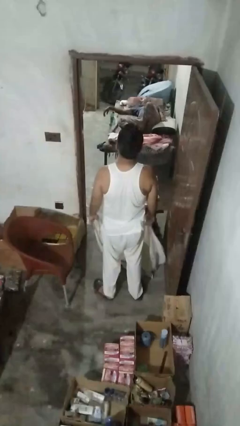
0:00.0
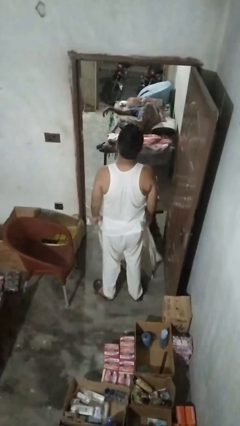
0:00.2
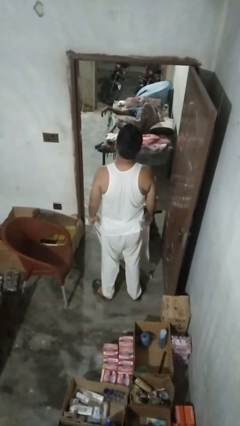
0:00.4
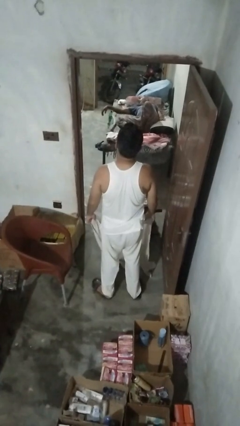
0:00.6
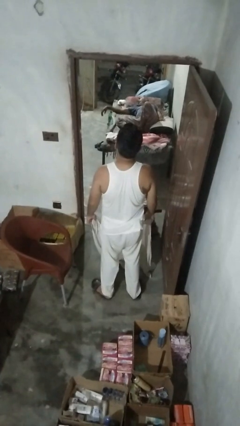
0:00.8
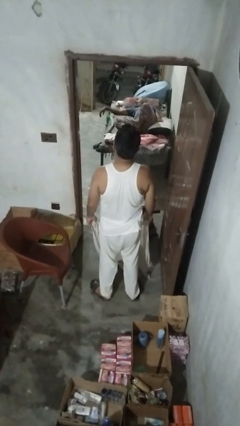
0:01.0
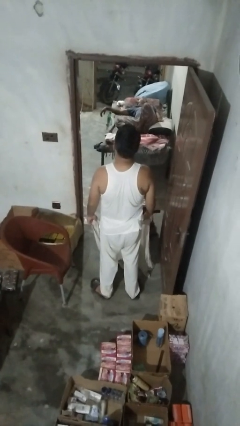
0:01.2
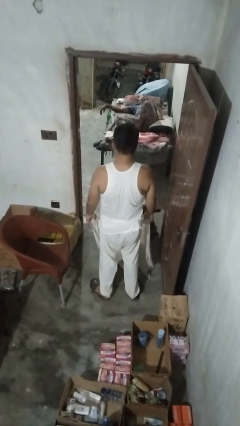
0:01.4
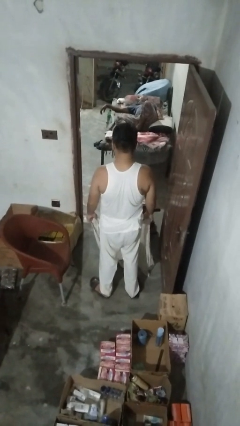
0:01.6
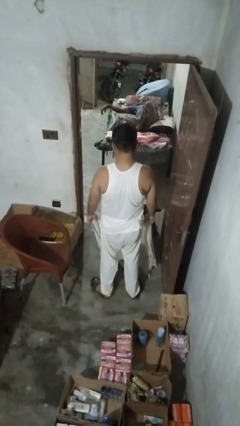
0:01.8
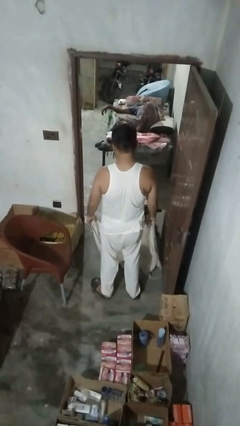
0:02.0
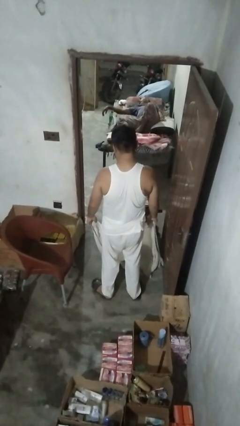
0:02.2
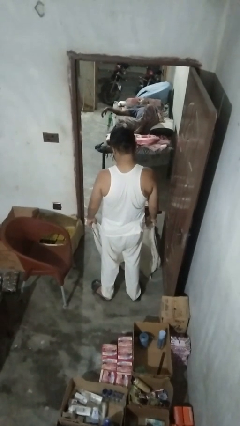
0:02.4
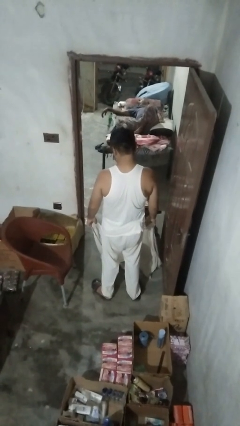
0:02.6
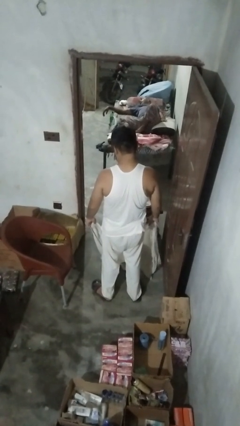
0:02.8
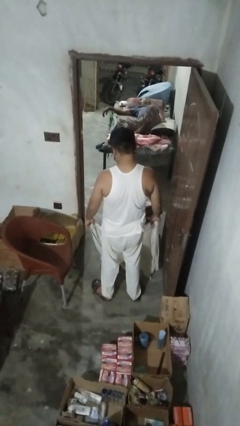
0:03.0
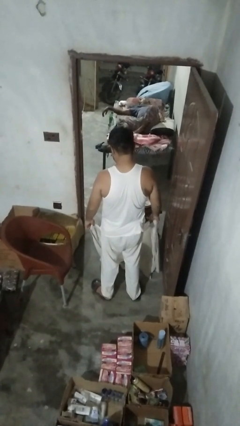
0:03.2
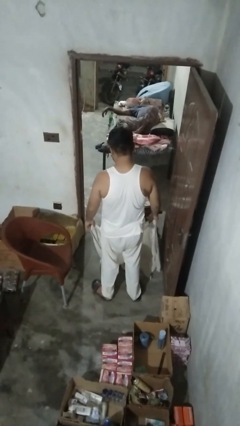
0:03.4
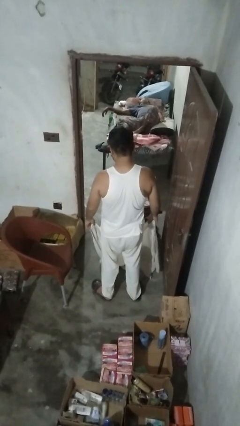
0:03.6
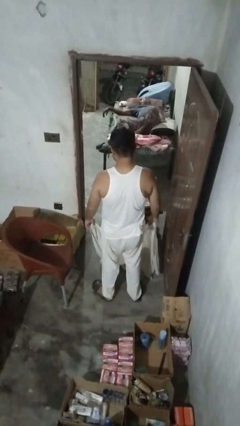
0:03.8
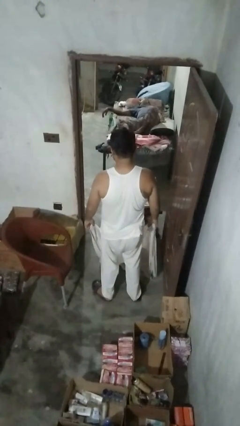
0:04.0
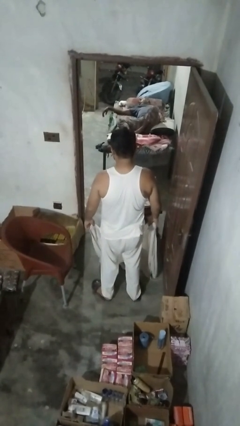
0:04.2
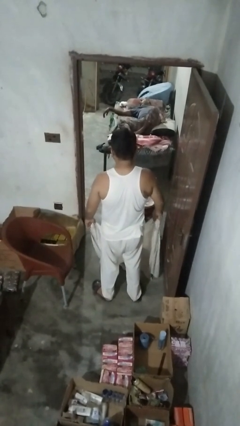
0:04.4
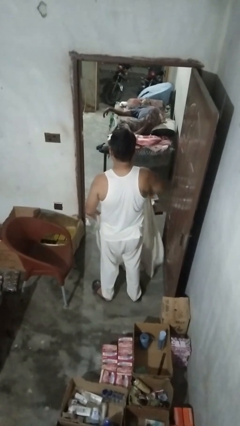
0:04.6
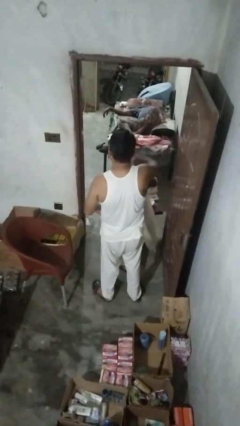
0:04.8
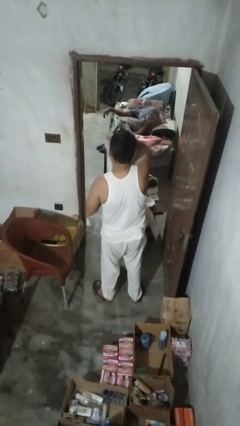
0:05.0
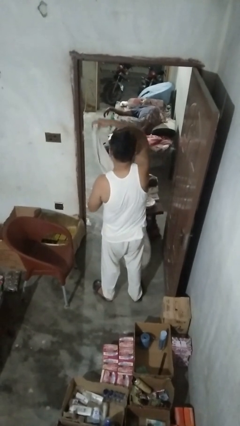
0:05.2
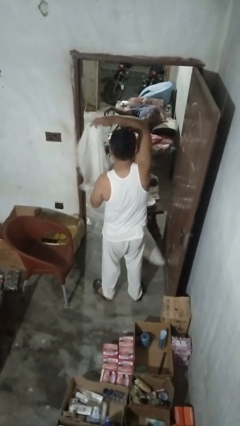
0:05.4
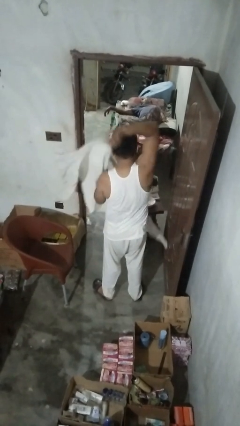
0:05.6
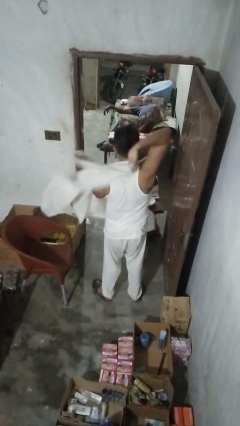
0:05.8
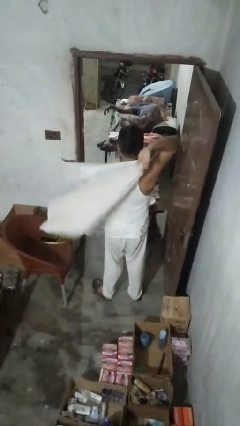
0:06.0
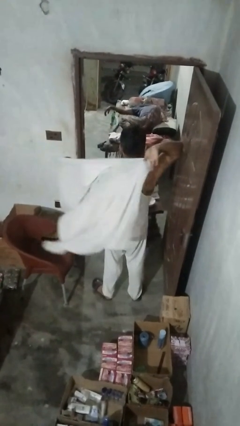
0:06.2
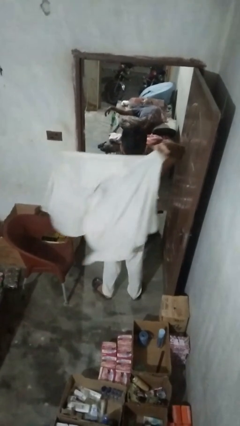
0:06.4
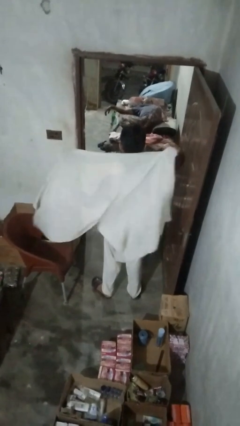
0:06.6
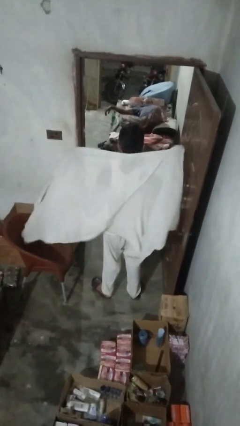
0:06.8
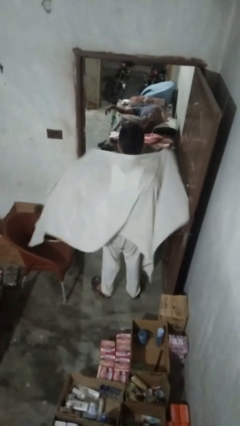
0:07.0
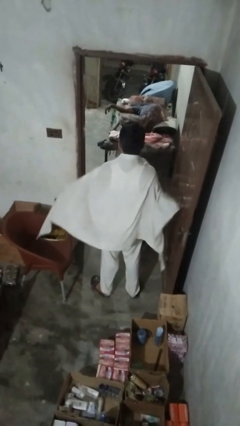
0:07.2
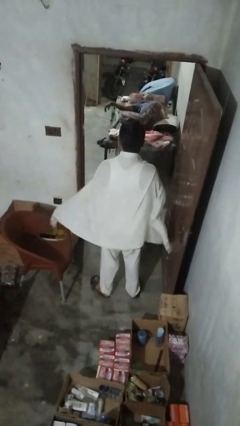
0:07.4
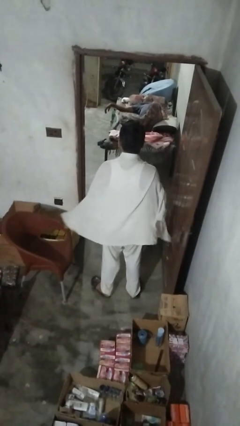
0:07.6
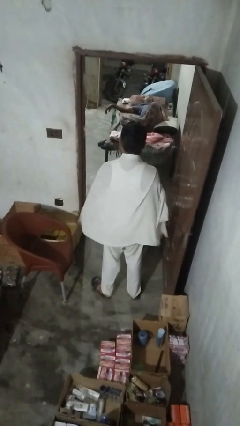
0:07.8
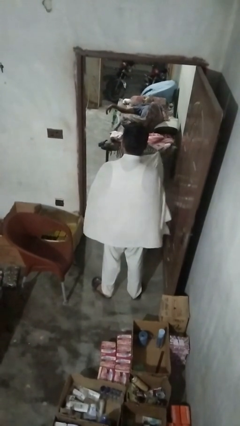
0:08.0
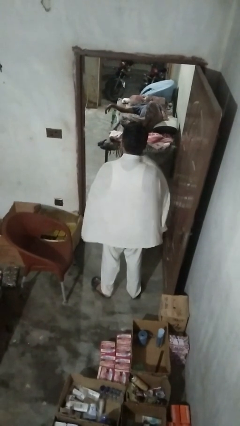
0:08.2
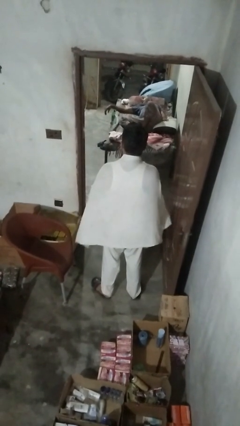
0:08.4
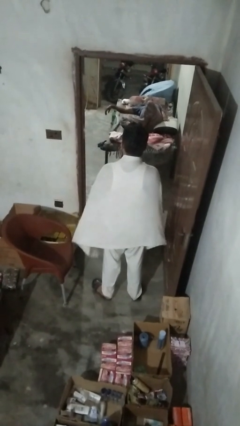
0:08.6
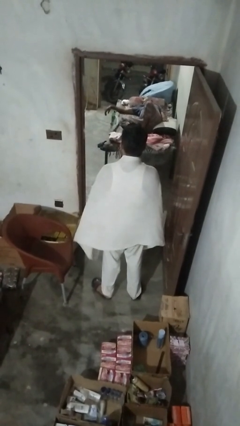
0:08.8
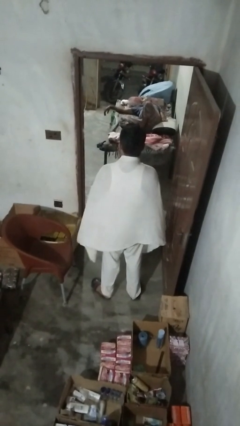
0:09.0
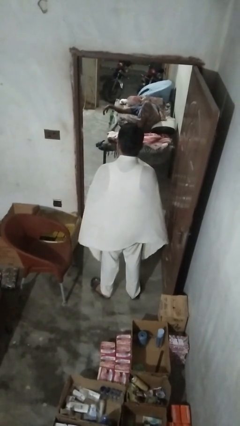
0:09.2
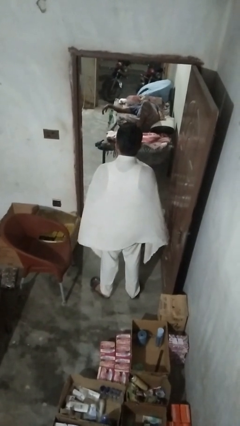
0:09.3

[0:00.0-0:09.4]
person folds blanket

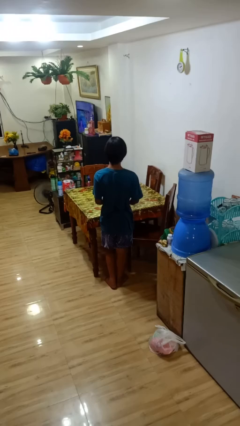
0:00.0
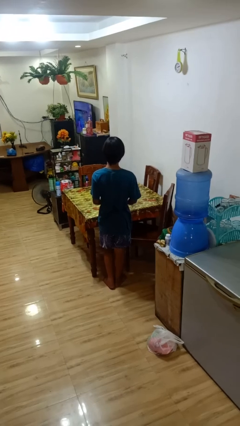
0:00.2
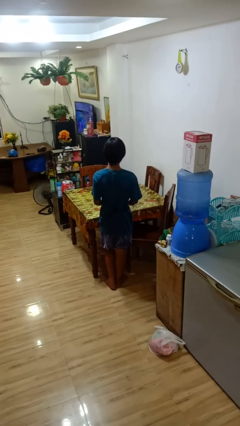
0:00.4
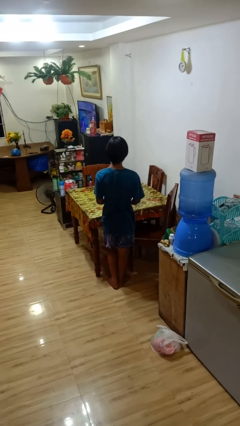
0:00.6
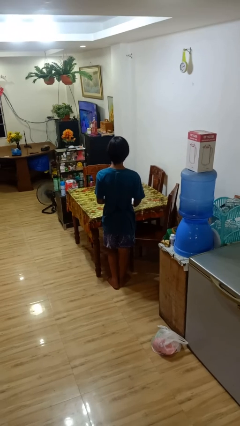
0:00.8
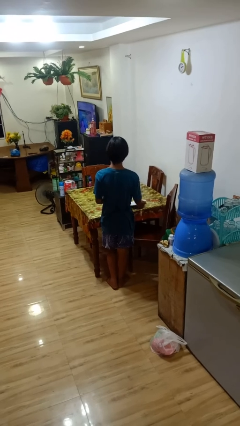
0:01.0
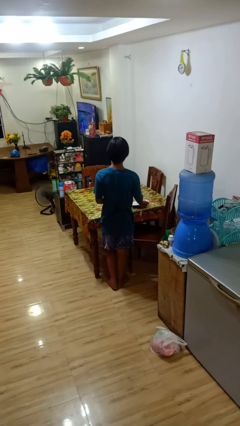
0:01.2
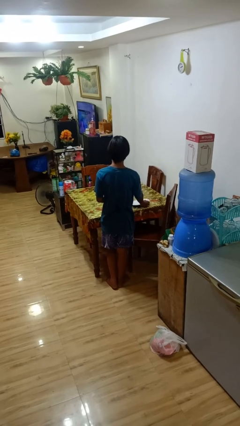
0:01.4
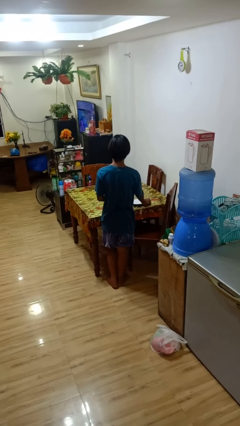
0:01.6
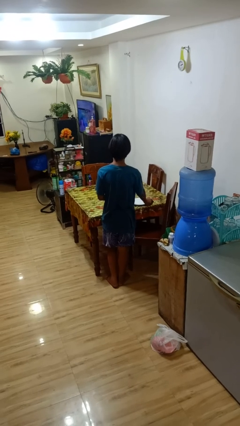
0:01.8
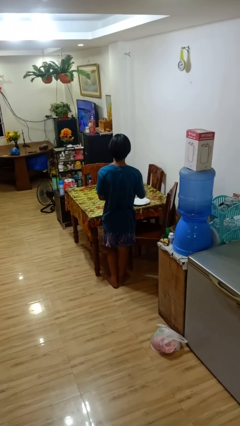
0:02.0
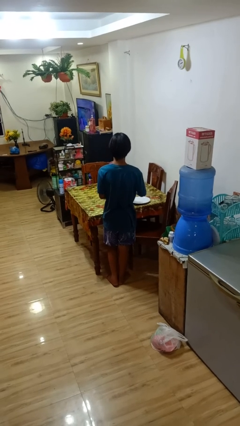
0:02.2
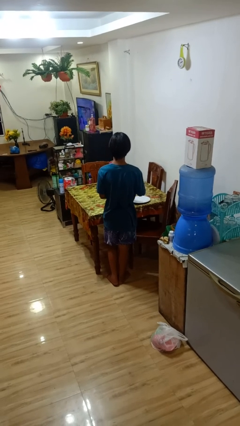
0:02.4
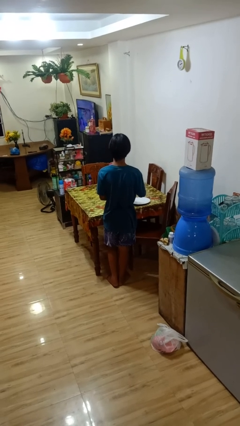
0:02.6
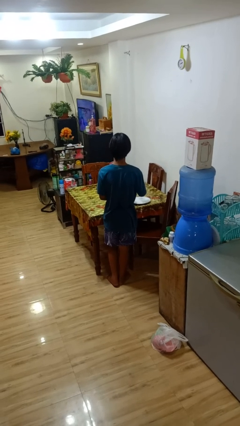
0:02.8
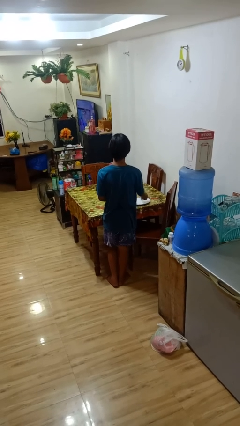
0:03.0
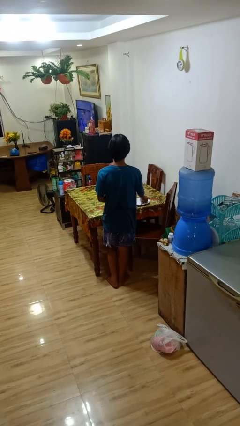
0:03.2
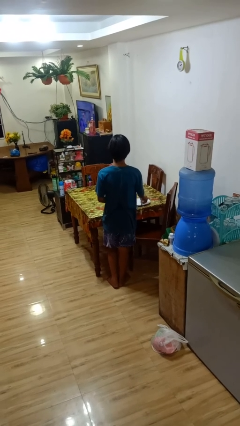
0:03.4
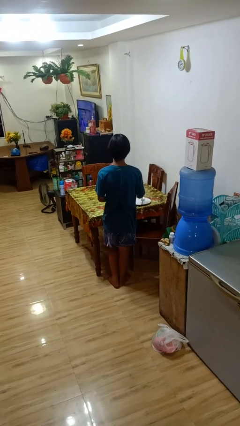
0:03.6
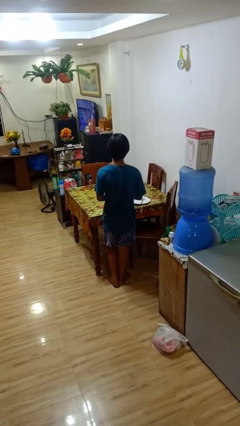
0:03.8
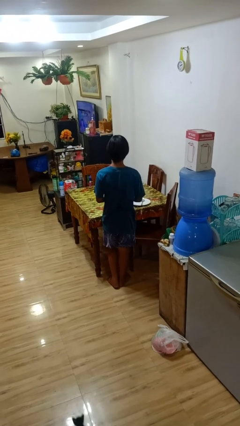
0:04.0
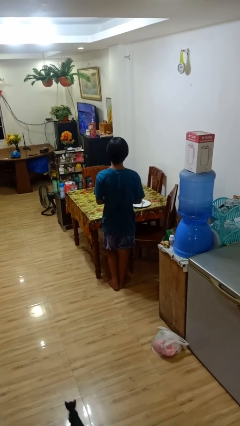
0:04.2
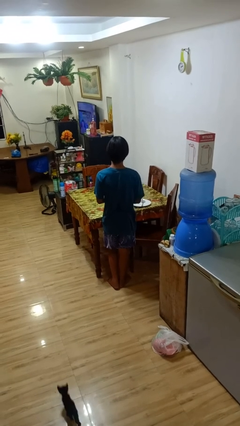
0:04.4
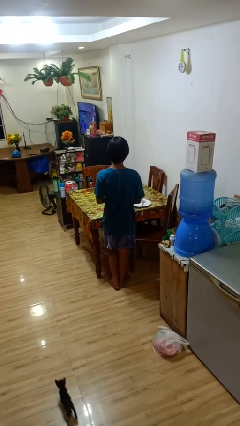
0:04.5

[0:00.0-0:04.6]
person sets table

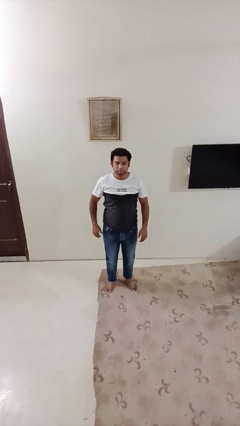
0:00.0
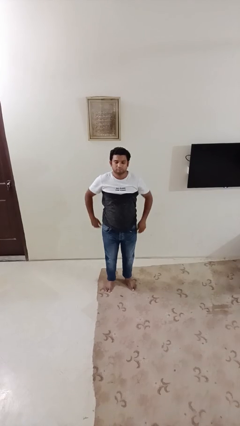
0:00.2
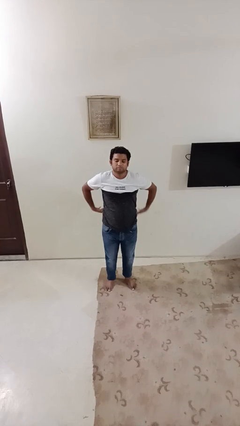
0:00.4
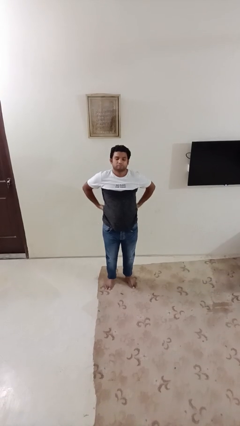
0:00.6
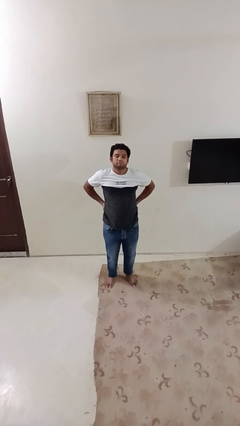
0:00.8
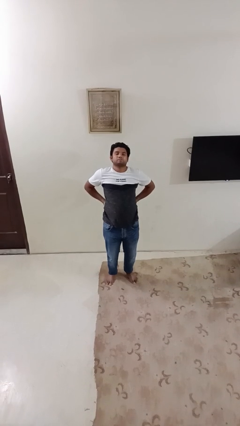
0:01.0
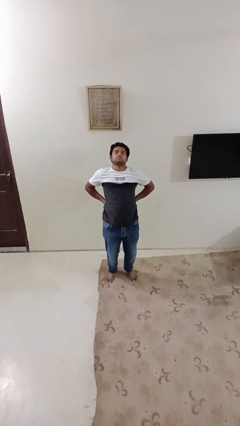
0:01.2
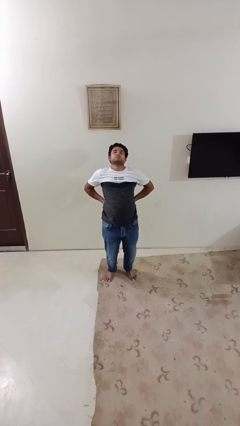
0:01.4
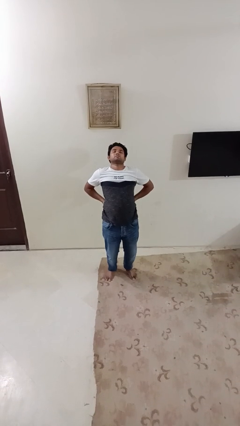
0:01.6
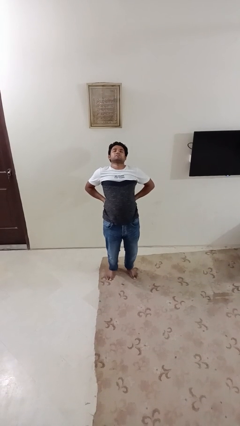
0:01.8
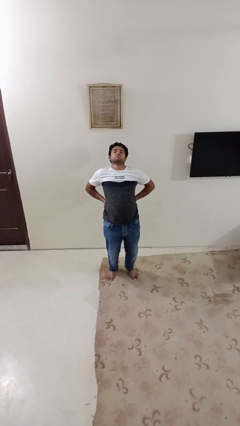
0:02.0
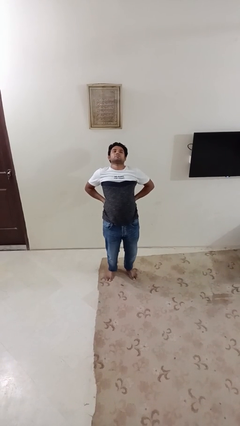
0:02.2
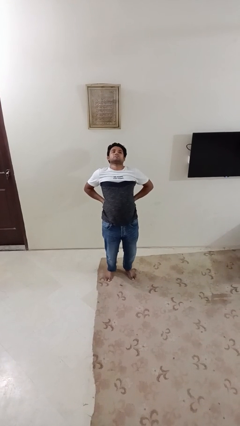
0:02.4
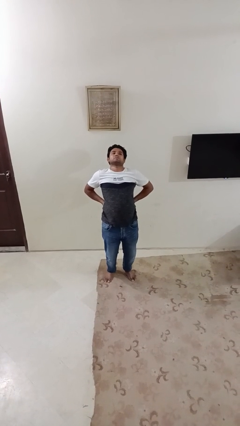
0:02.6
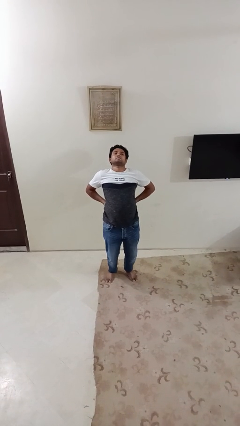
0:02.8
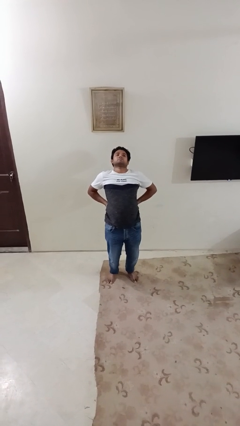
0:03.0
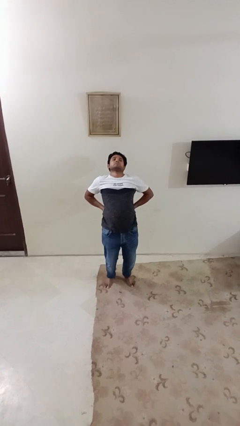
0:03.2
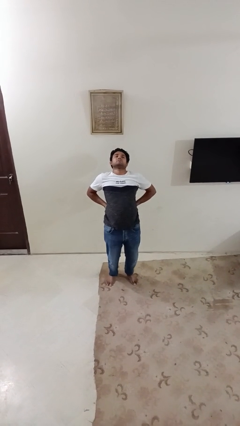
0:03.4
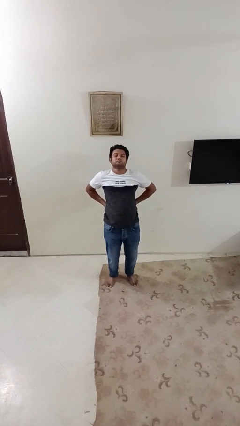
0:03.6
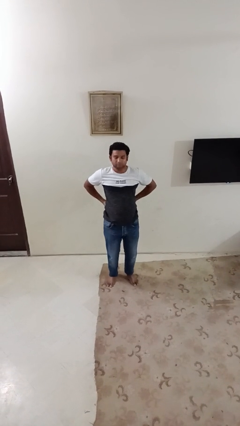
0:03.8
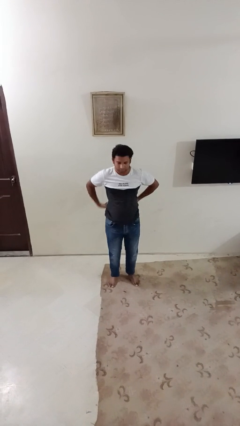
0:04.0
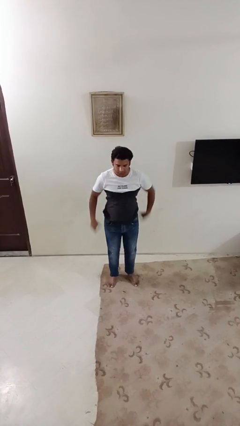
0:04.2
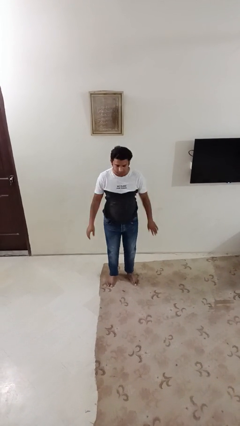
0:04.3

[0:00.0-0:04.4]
person stretches back
